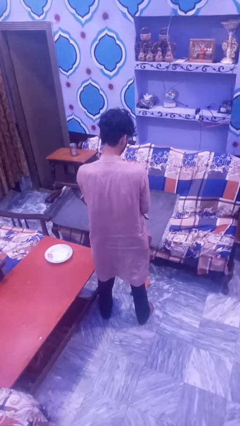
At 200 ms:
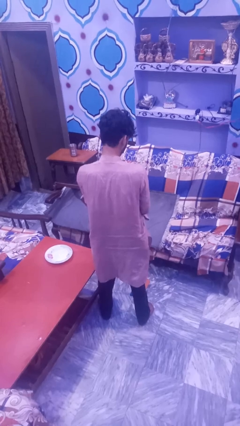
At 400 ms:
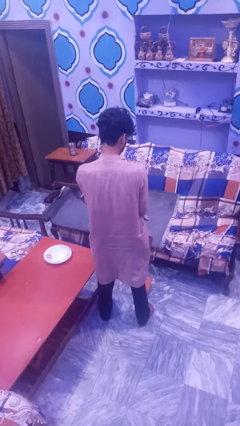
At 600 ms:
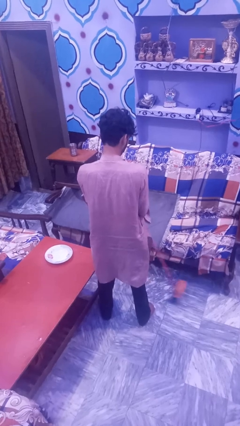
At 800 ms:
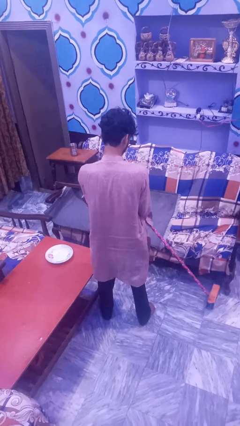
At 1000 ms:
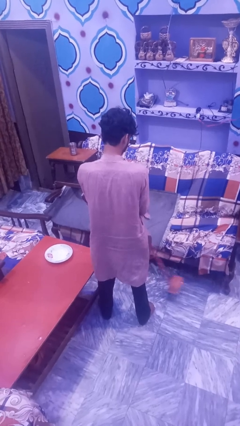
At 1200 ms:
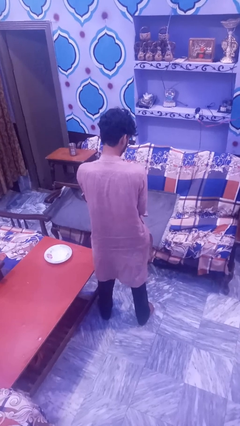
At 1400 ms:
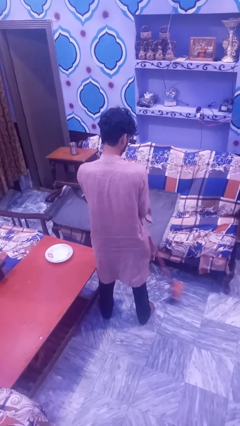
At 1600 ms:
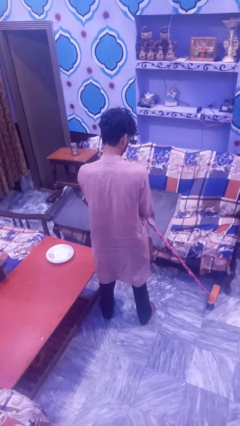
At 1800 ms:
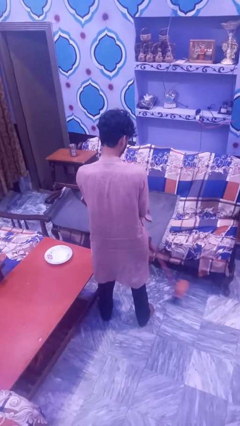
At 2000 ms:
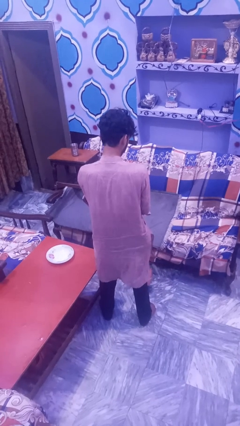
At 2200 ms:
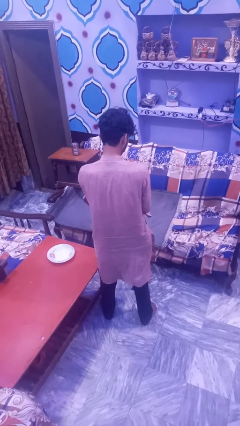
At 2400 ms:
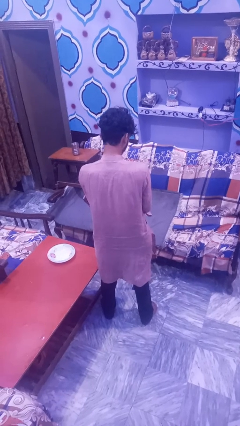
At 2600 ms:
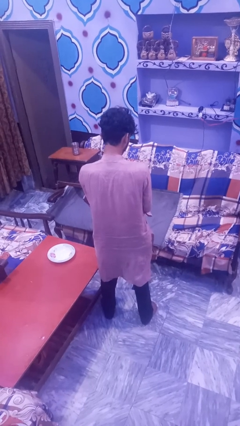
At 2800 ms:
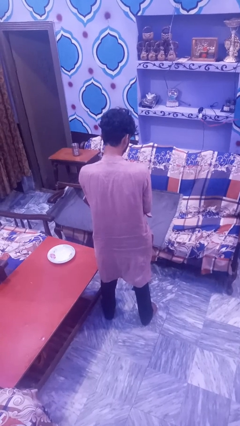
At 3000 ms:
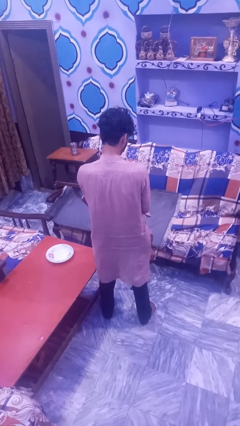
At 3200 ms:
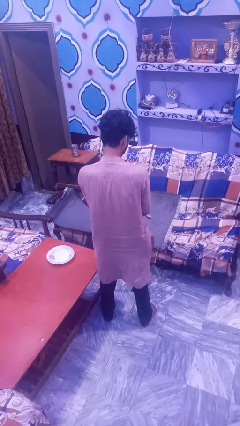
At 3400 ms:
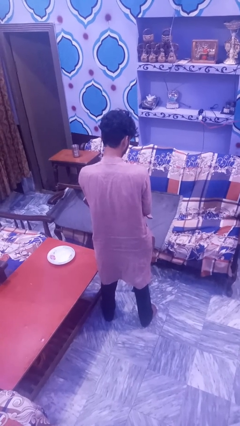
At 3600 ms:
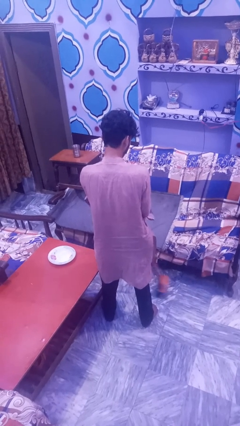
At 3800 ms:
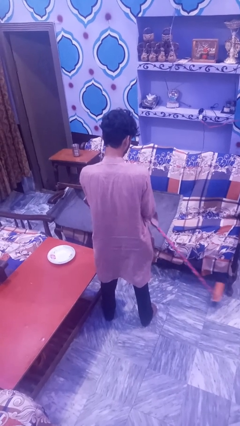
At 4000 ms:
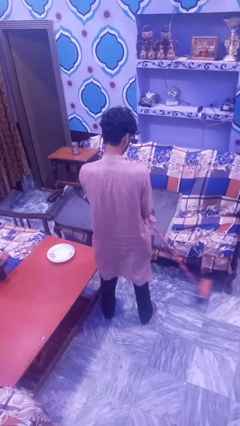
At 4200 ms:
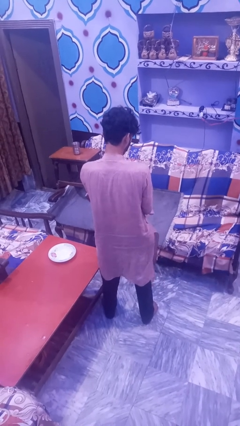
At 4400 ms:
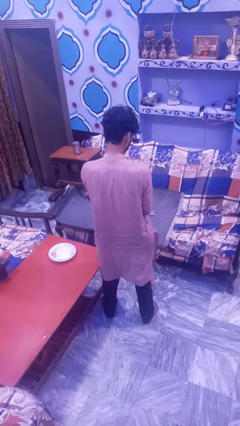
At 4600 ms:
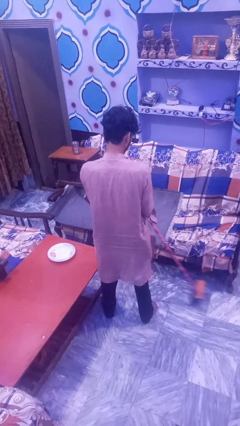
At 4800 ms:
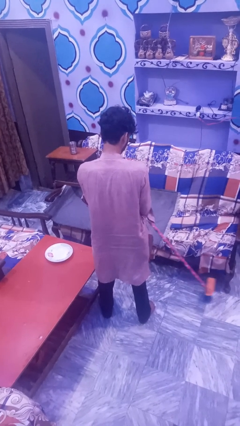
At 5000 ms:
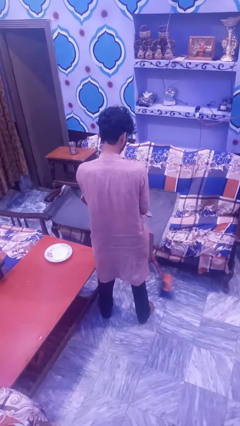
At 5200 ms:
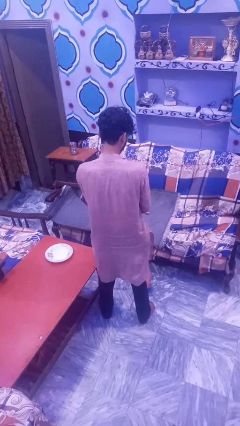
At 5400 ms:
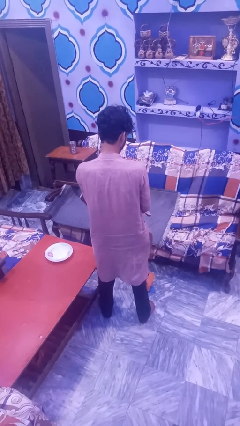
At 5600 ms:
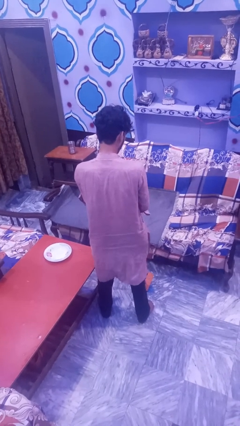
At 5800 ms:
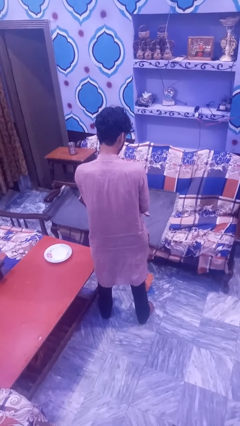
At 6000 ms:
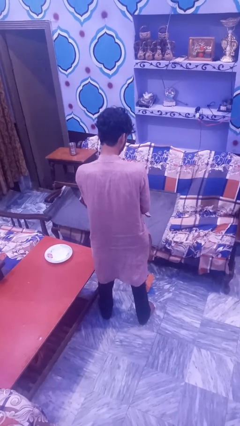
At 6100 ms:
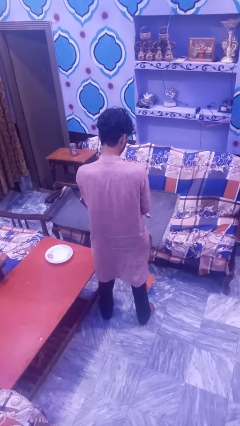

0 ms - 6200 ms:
person mops

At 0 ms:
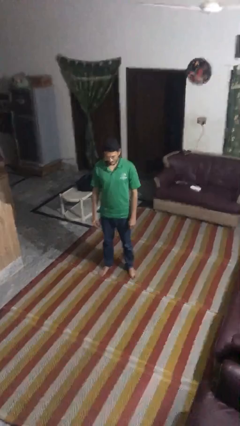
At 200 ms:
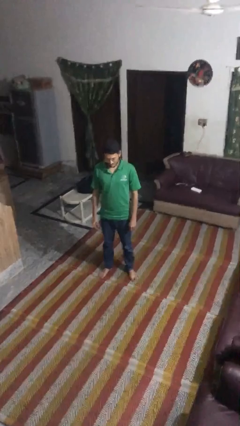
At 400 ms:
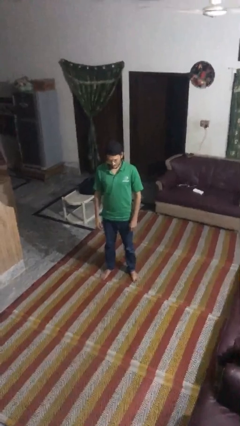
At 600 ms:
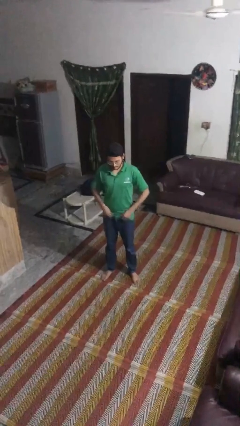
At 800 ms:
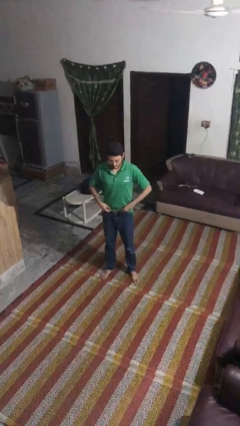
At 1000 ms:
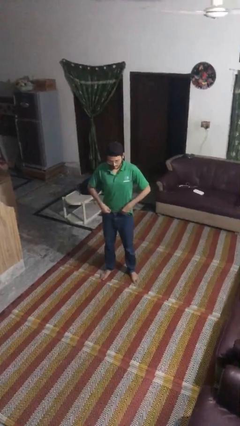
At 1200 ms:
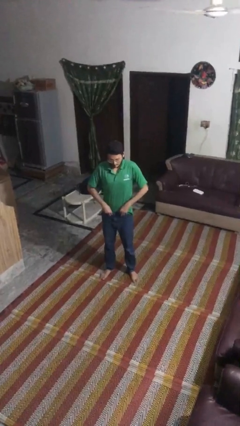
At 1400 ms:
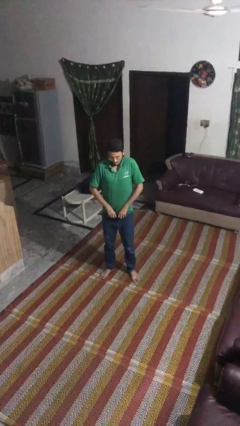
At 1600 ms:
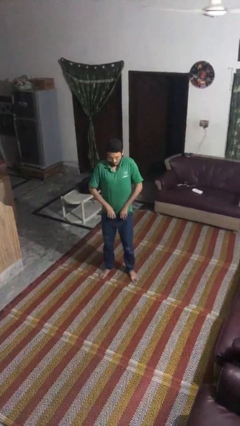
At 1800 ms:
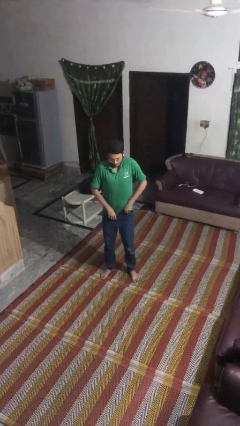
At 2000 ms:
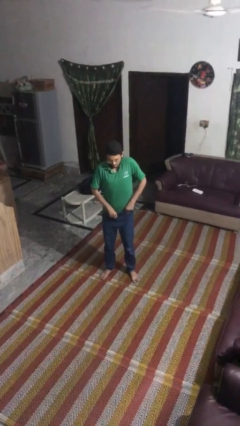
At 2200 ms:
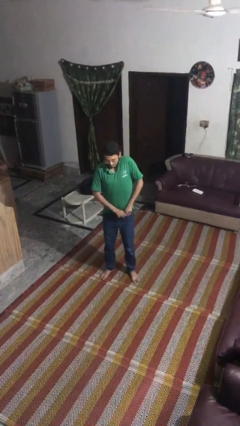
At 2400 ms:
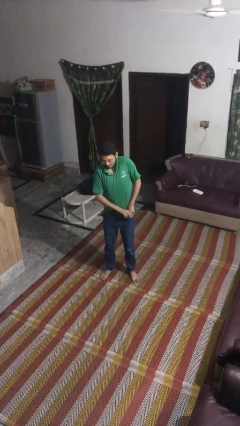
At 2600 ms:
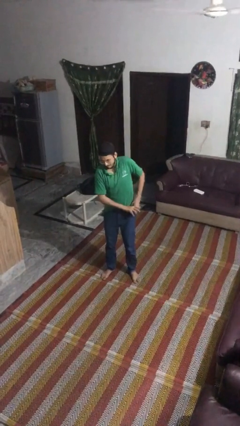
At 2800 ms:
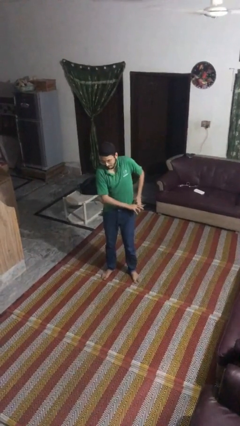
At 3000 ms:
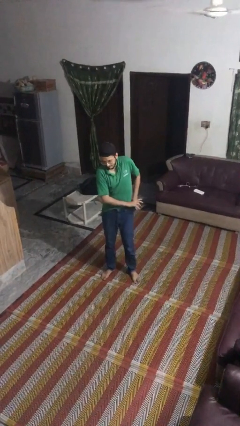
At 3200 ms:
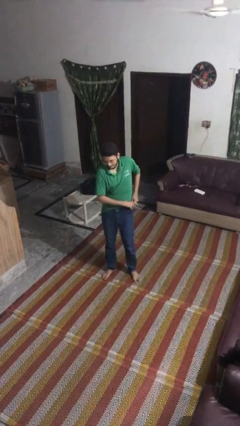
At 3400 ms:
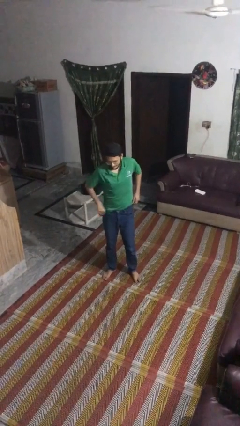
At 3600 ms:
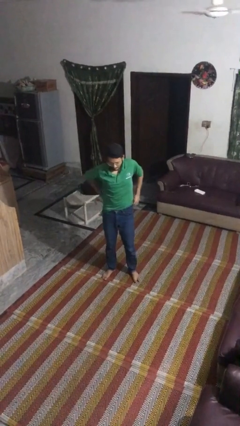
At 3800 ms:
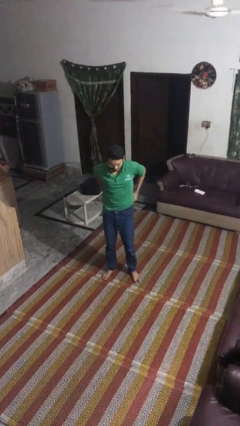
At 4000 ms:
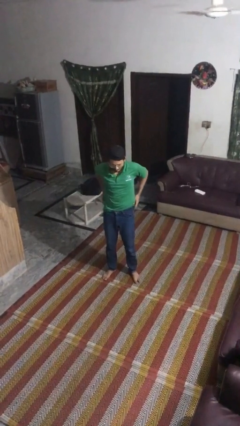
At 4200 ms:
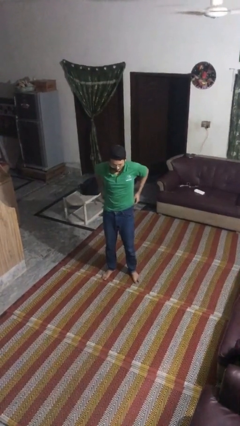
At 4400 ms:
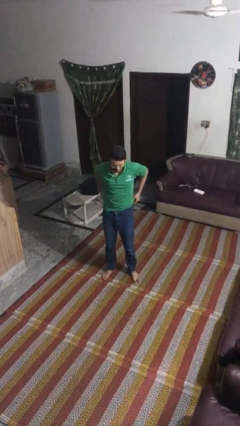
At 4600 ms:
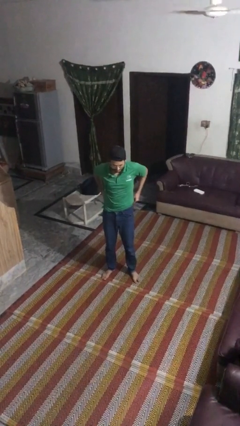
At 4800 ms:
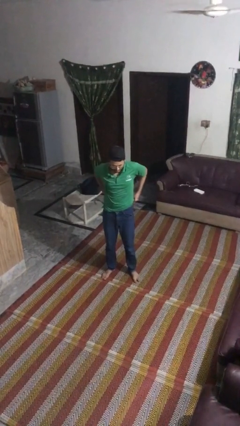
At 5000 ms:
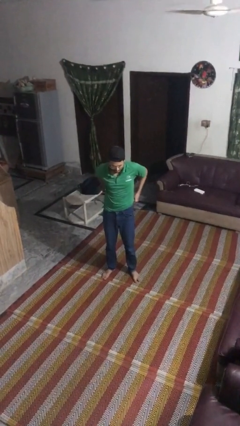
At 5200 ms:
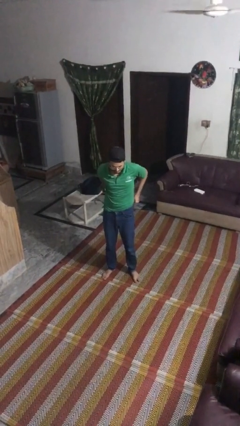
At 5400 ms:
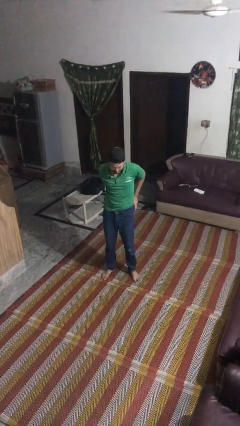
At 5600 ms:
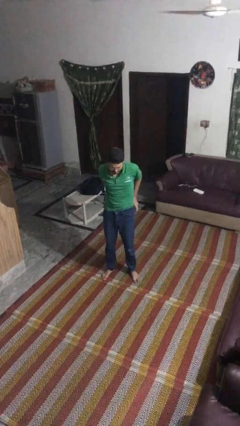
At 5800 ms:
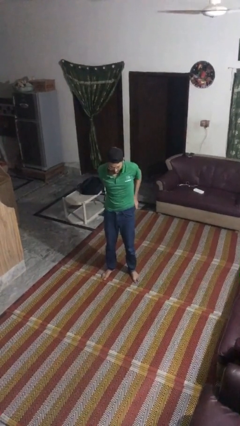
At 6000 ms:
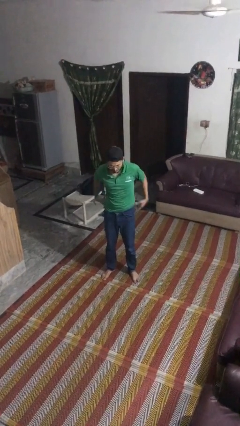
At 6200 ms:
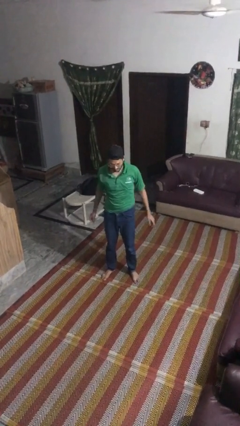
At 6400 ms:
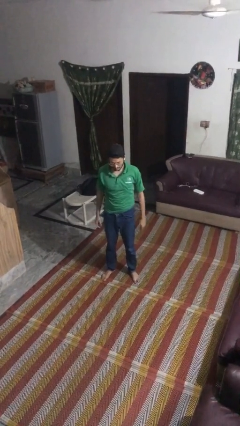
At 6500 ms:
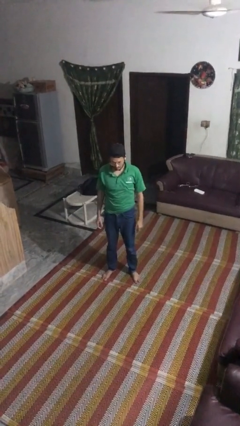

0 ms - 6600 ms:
person tucks in shirt

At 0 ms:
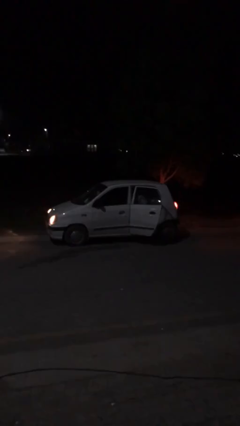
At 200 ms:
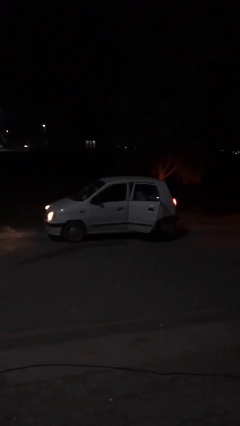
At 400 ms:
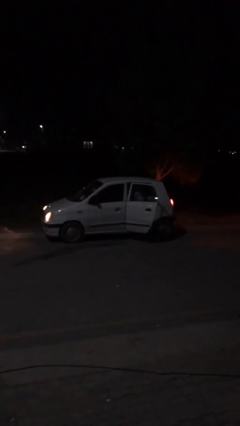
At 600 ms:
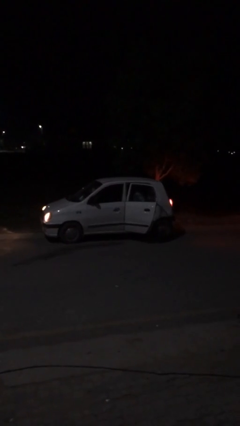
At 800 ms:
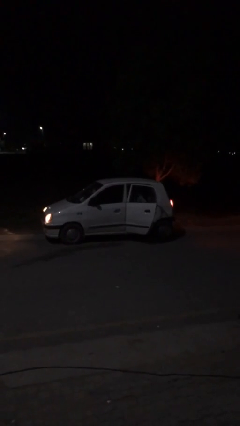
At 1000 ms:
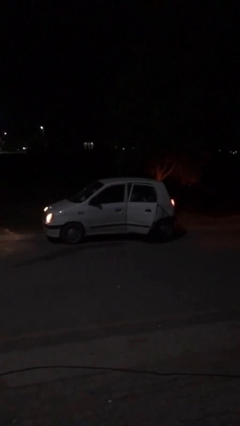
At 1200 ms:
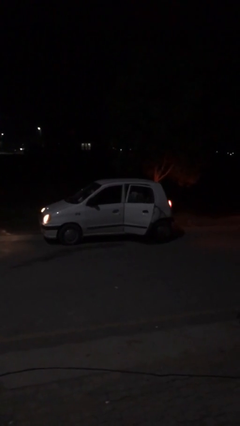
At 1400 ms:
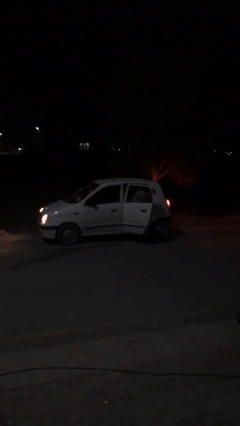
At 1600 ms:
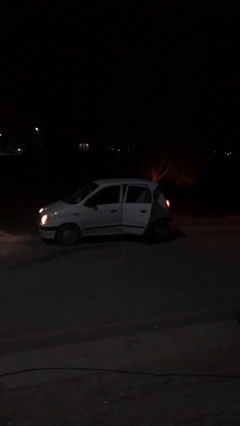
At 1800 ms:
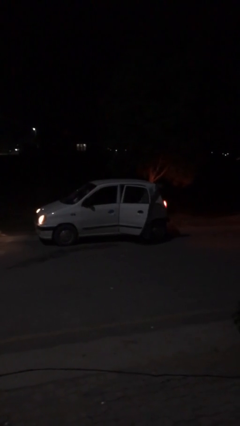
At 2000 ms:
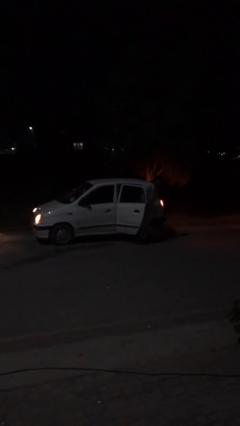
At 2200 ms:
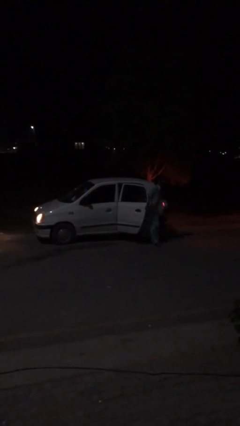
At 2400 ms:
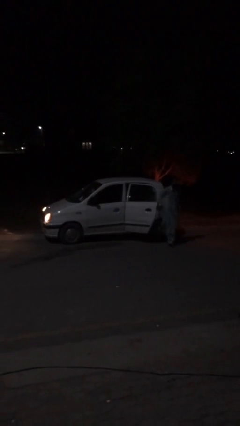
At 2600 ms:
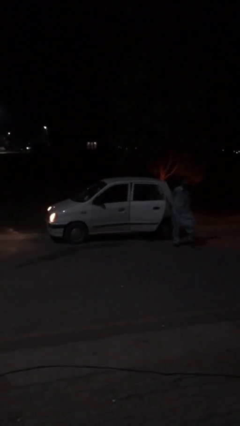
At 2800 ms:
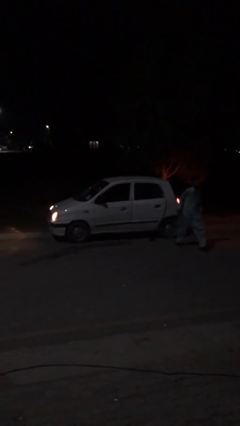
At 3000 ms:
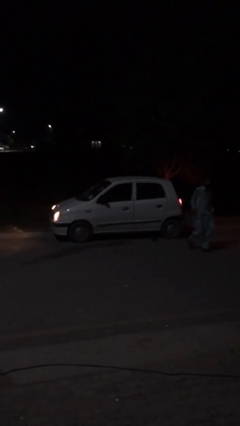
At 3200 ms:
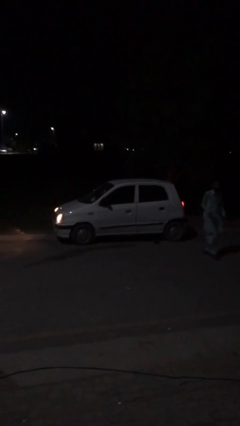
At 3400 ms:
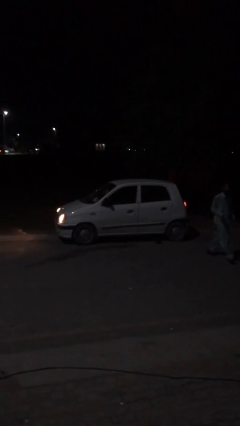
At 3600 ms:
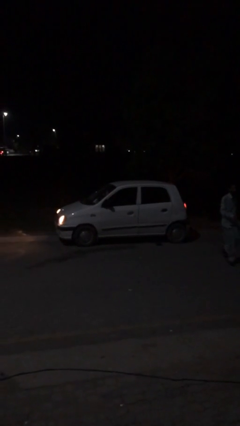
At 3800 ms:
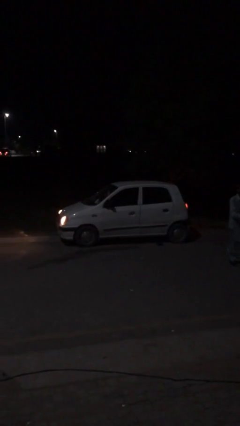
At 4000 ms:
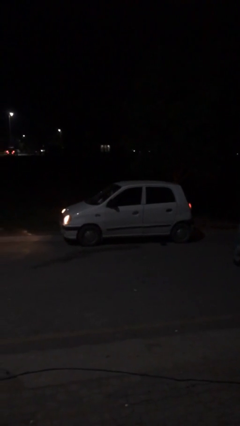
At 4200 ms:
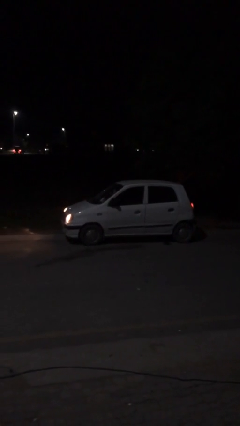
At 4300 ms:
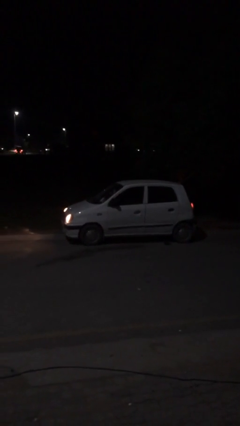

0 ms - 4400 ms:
car drops off person

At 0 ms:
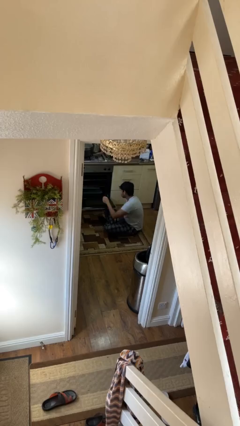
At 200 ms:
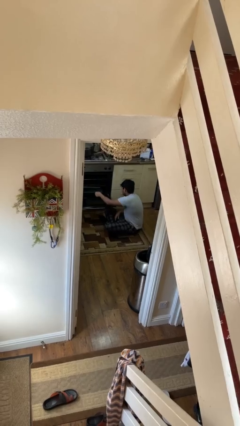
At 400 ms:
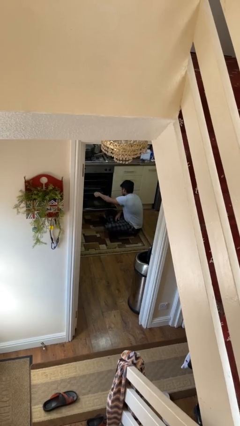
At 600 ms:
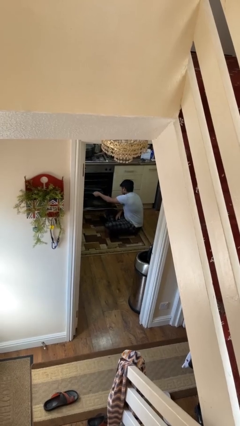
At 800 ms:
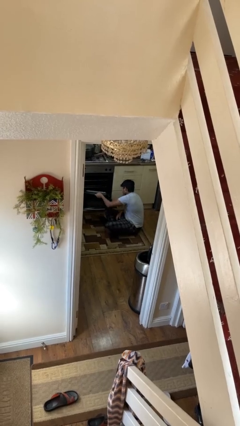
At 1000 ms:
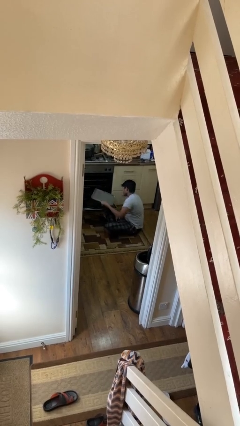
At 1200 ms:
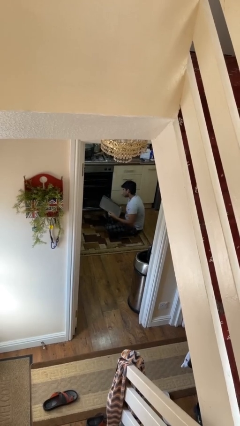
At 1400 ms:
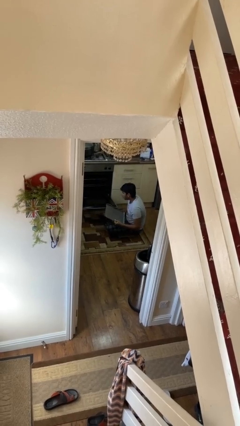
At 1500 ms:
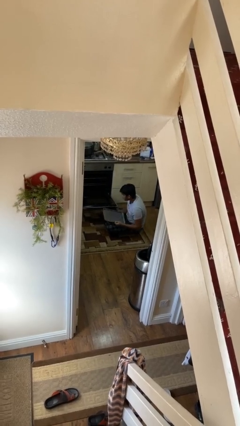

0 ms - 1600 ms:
person takes object from oven
